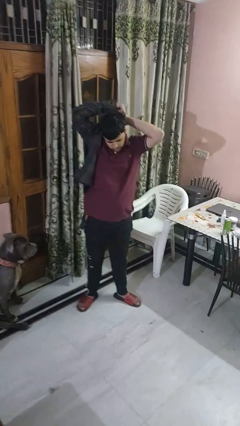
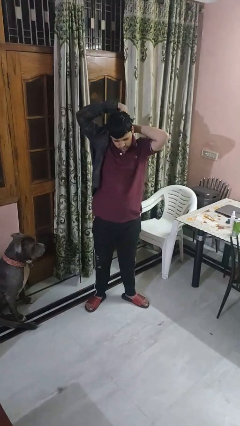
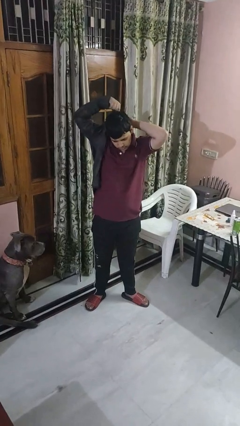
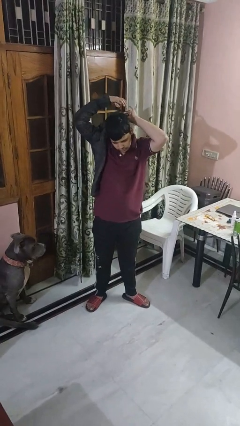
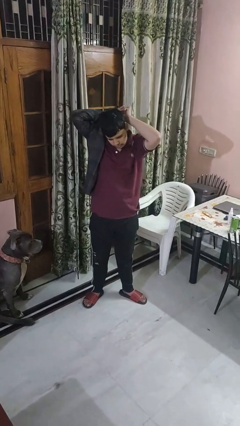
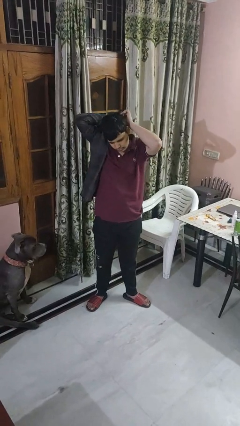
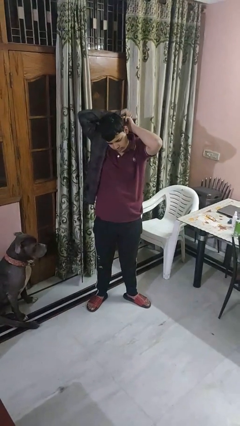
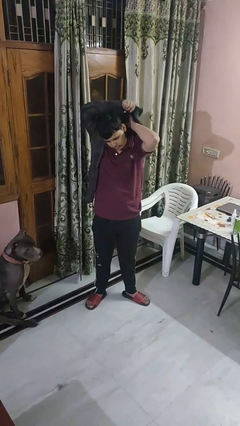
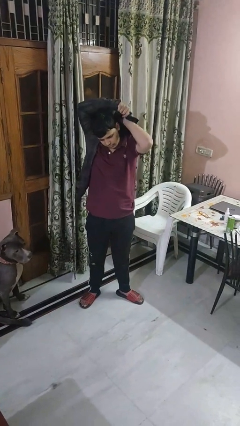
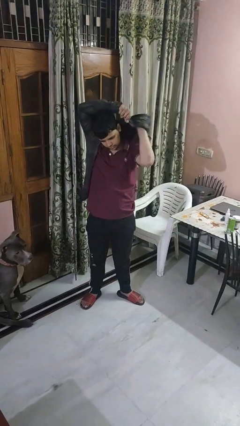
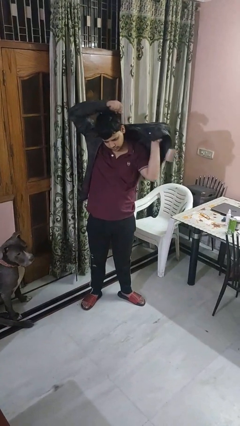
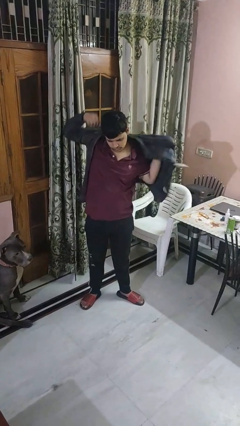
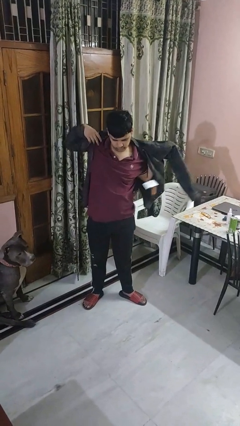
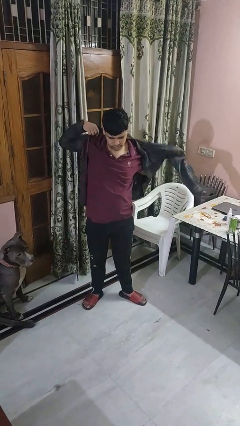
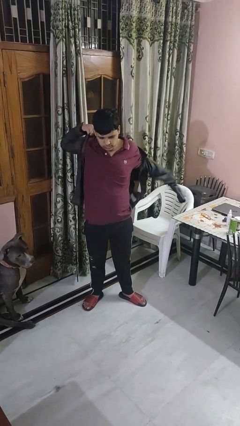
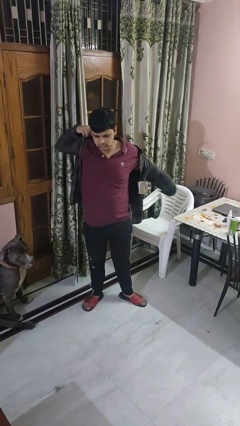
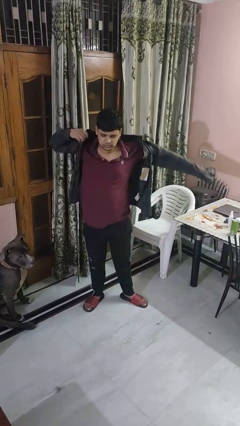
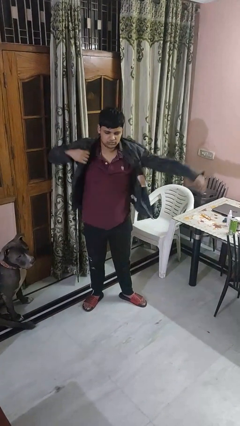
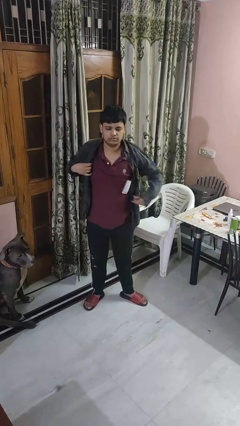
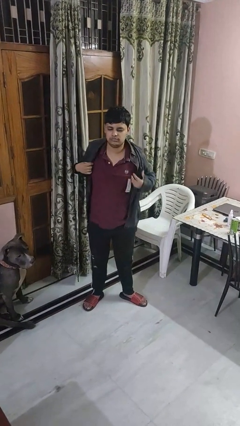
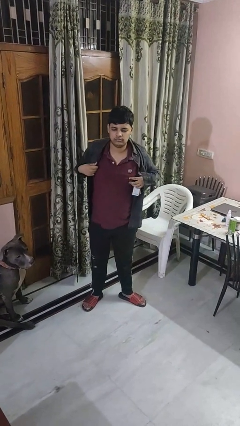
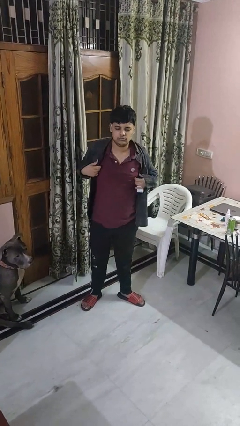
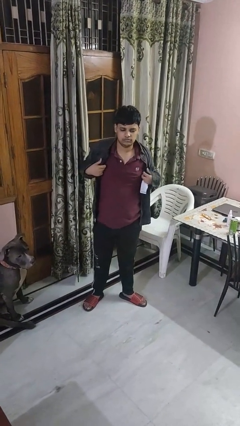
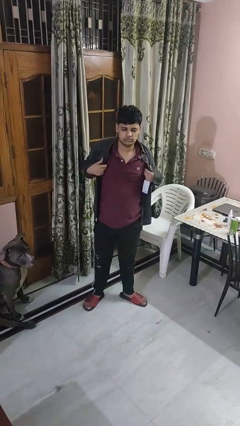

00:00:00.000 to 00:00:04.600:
person puts on shirt

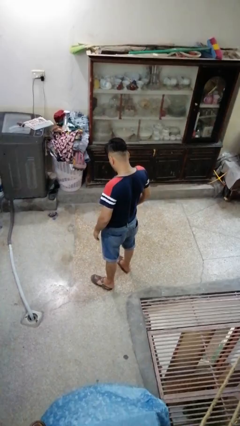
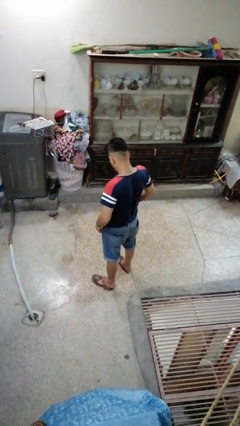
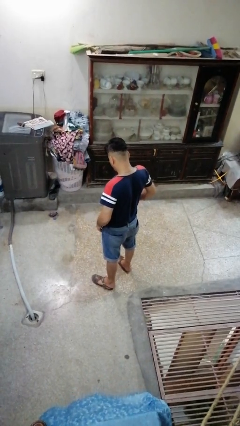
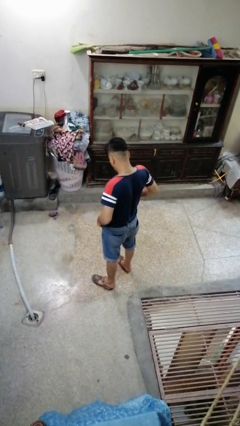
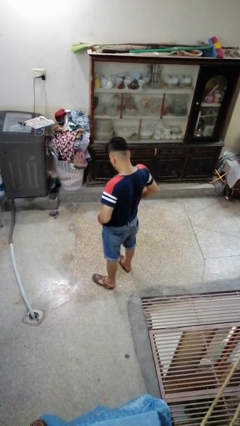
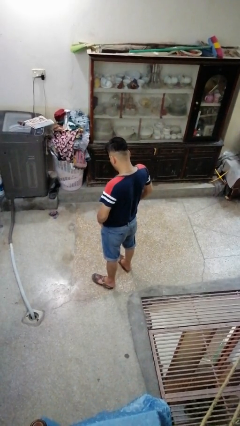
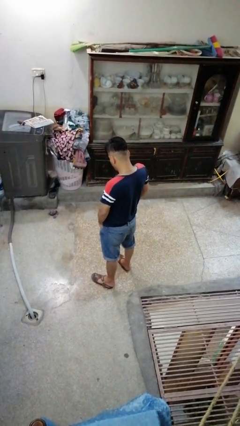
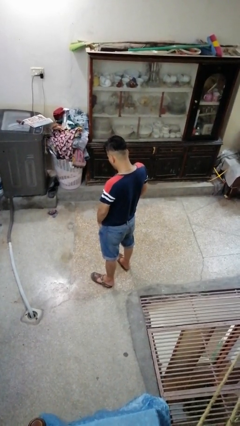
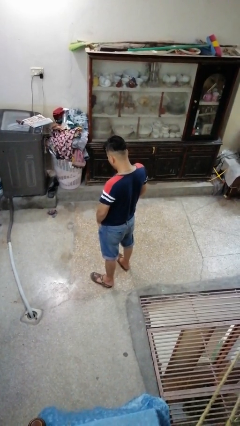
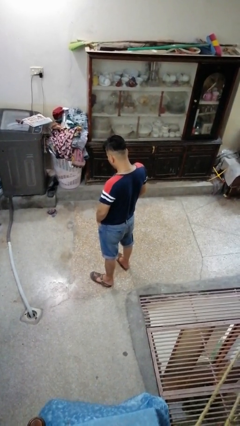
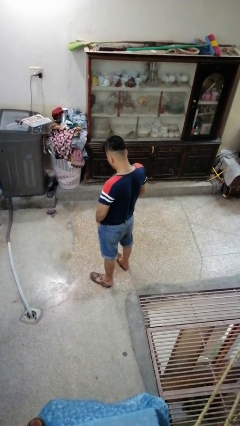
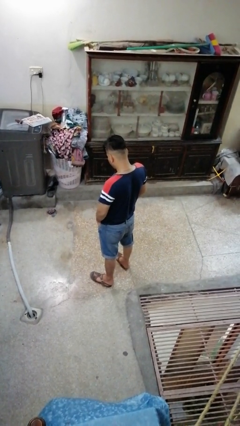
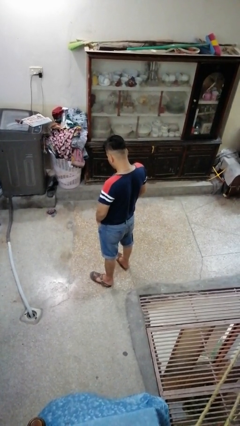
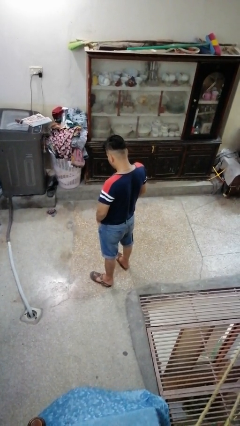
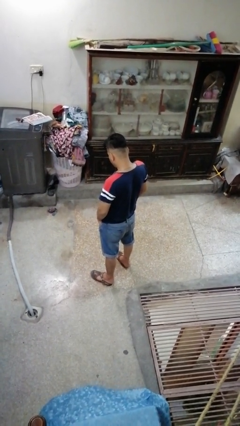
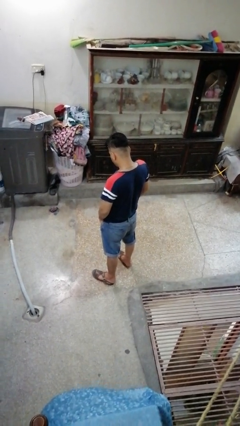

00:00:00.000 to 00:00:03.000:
person puts hands in back pockets

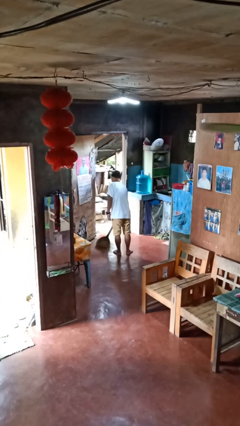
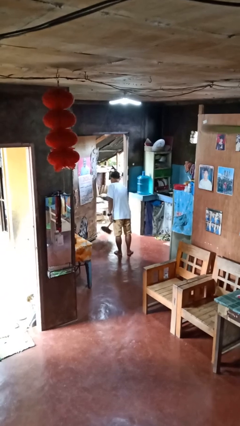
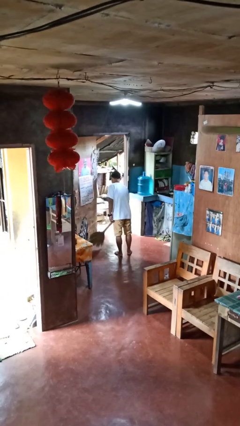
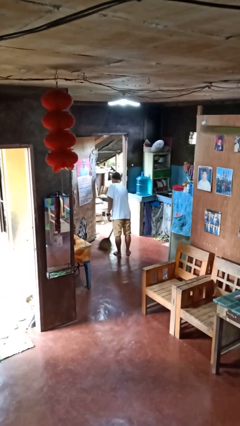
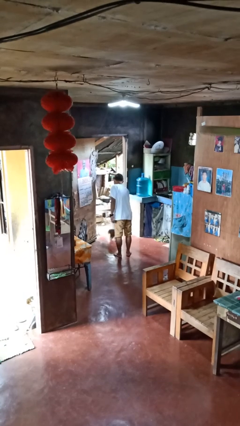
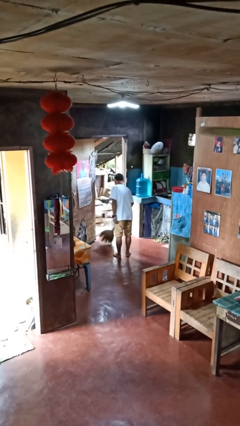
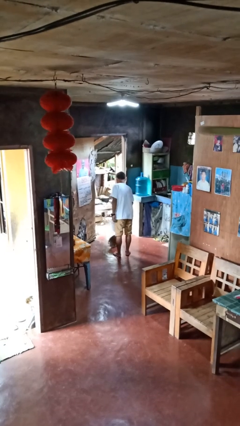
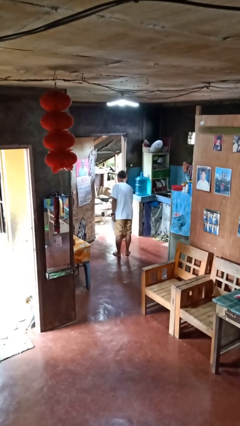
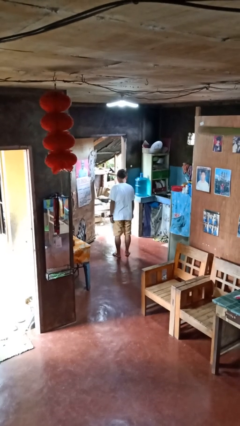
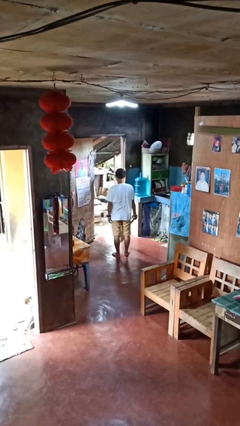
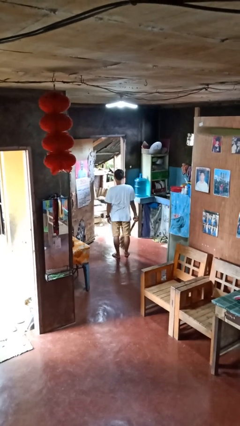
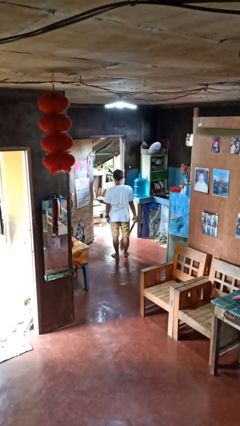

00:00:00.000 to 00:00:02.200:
person sweeps floor

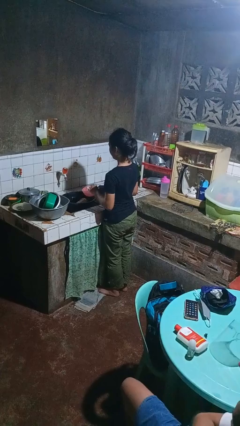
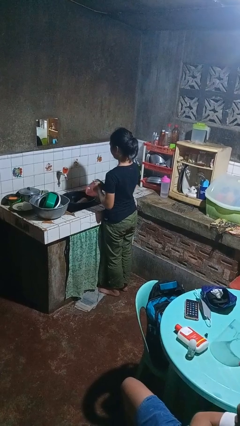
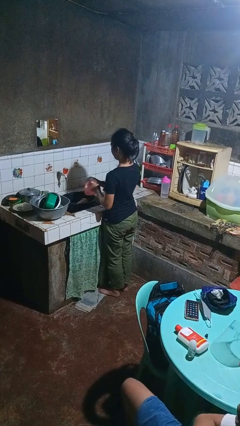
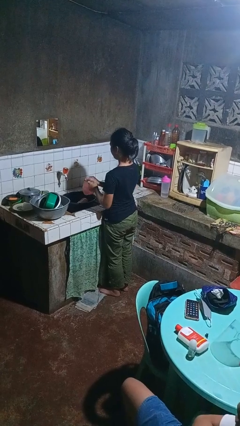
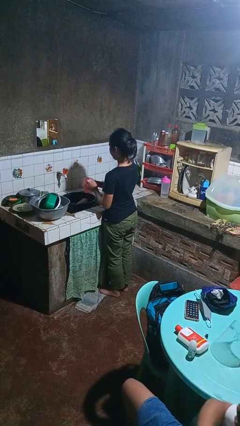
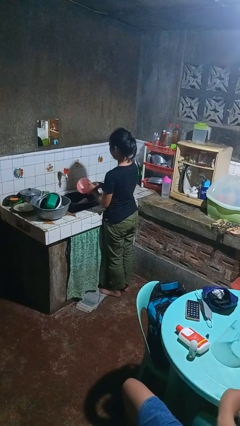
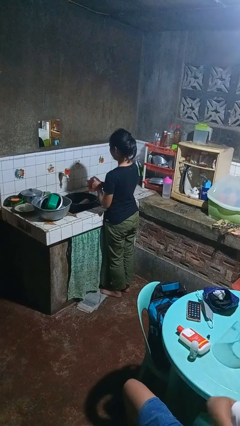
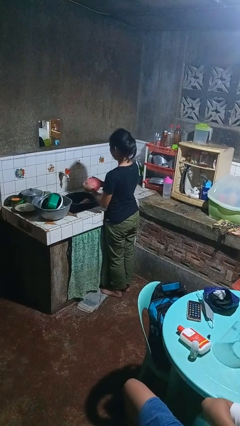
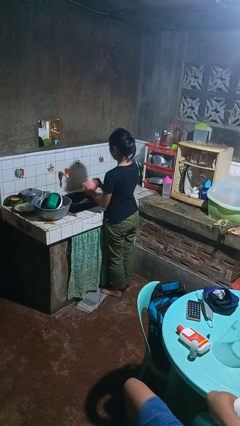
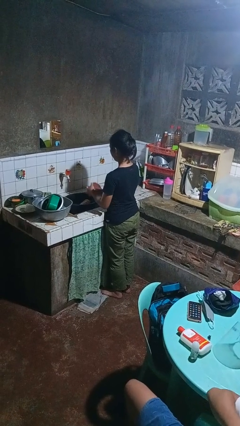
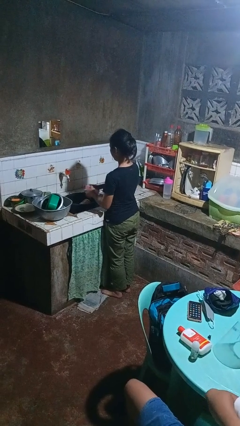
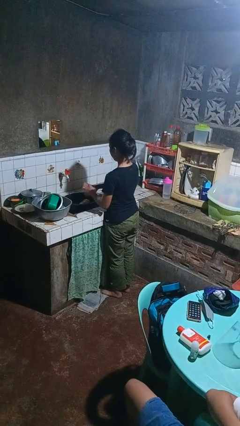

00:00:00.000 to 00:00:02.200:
person washes dish

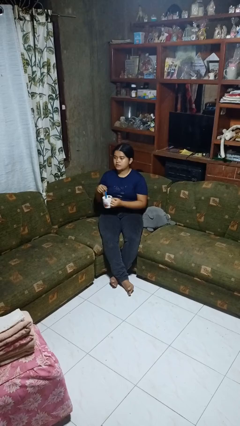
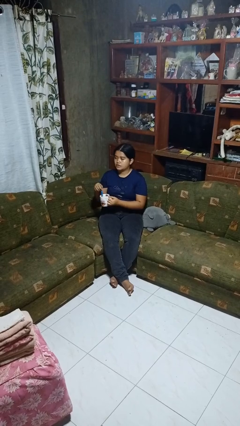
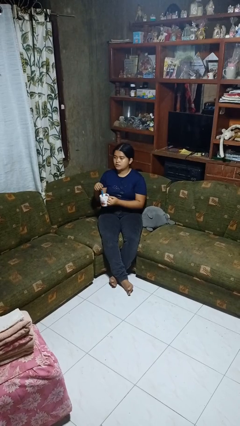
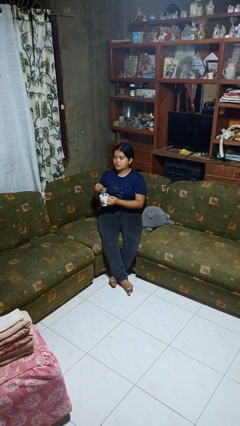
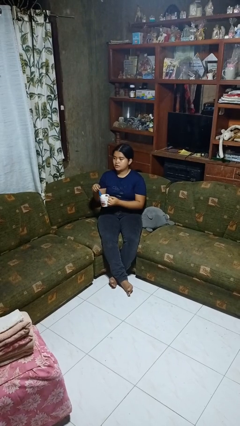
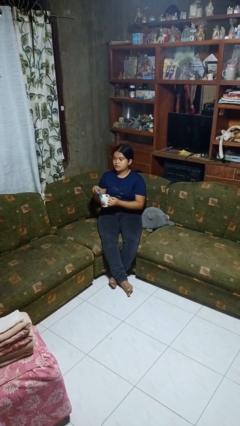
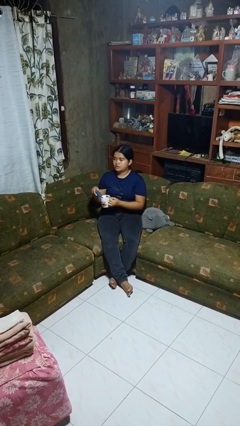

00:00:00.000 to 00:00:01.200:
person stirs mug

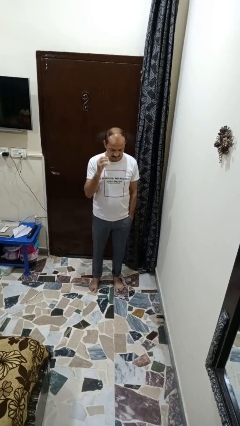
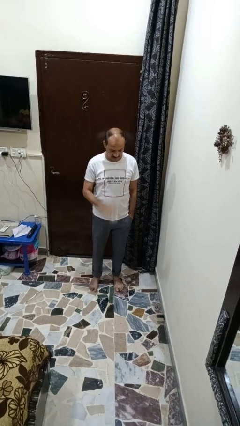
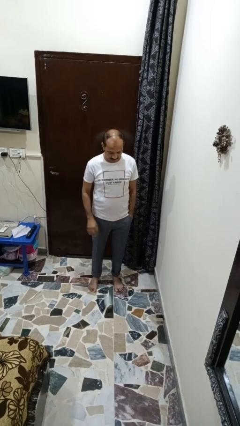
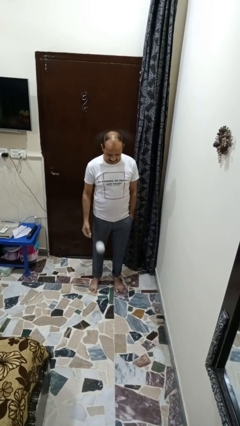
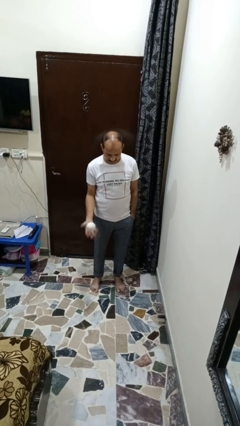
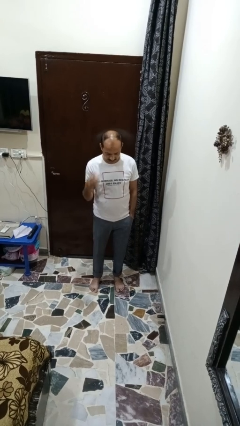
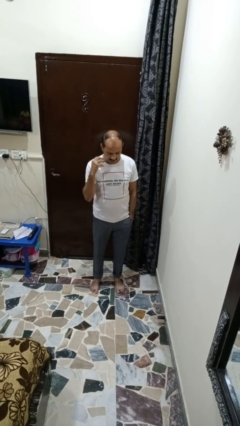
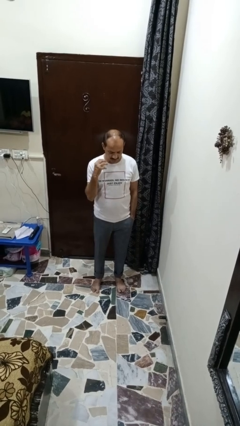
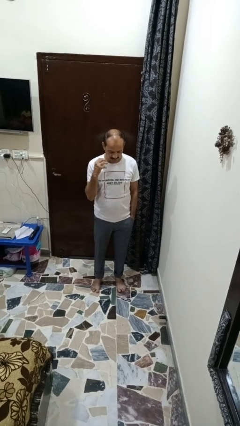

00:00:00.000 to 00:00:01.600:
person bounces ball on floor

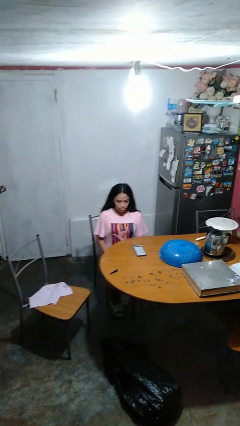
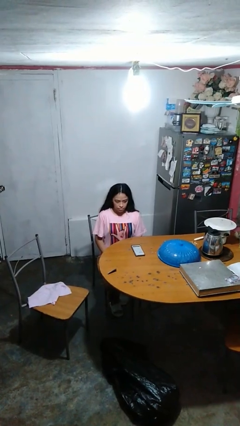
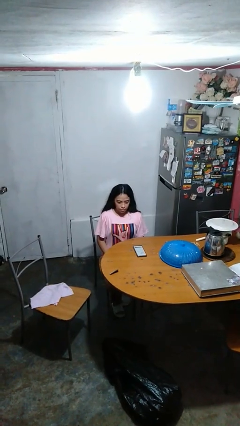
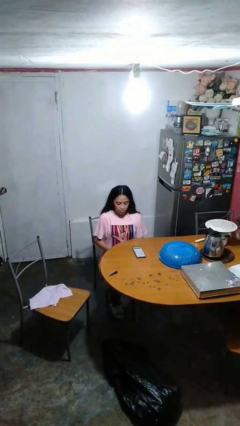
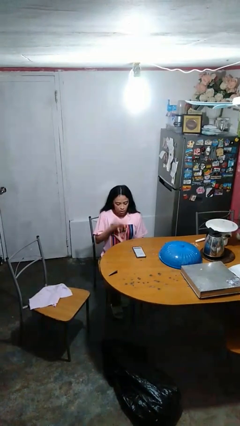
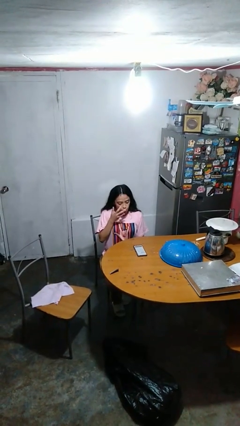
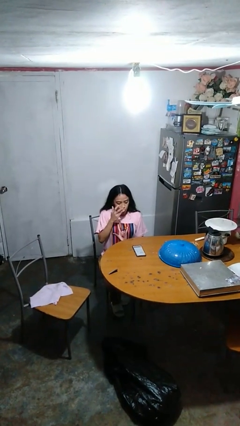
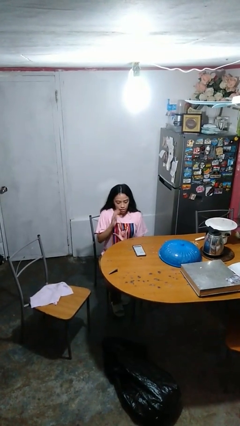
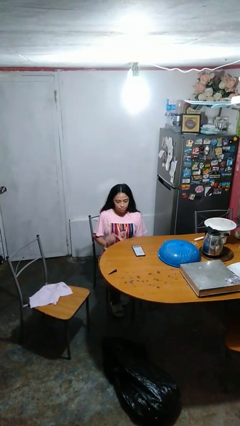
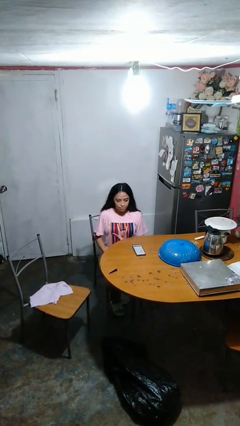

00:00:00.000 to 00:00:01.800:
person licks fingers

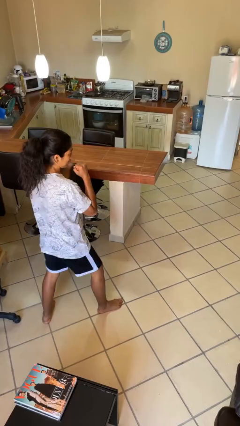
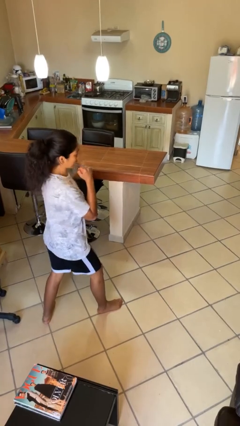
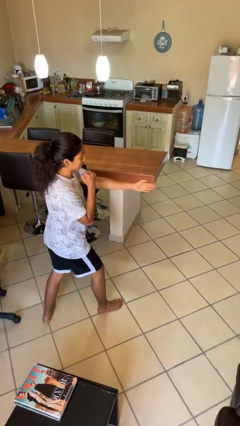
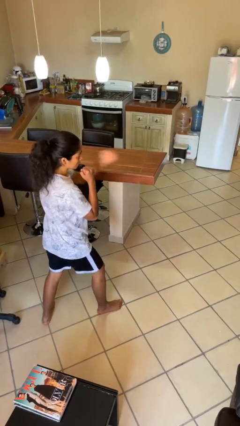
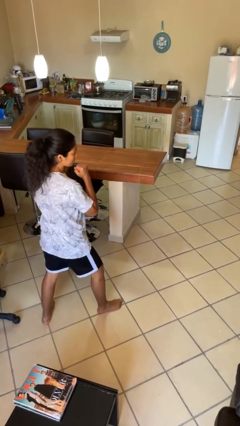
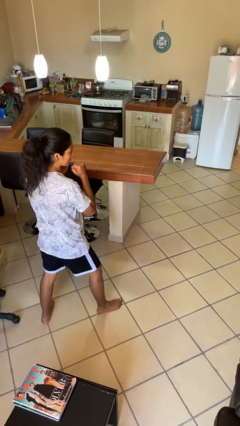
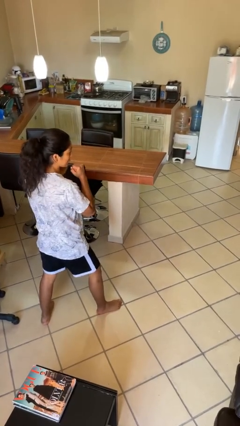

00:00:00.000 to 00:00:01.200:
person karate chop
